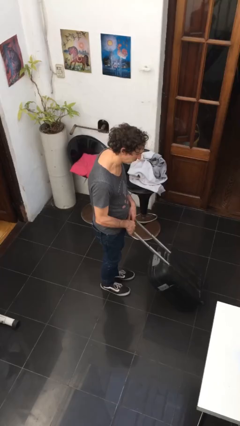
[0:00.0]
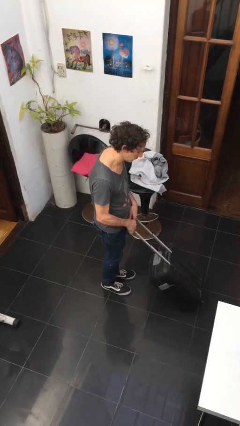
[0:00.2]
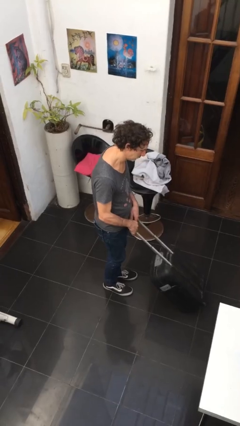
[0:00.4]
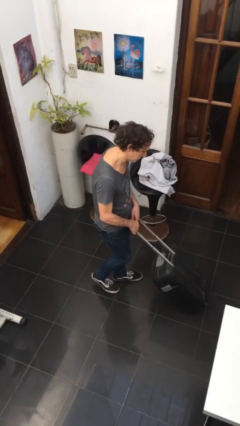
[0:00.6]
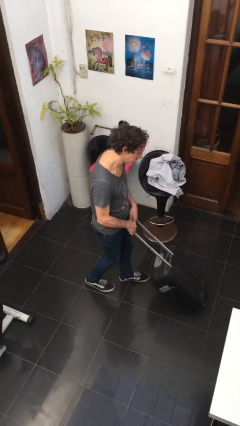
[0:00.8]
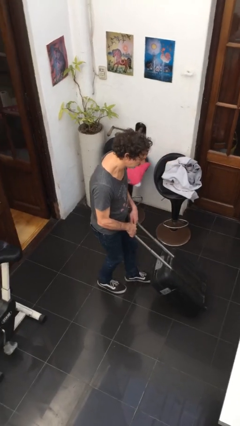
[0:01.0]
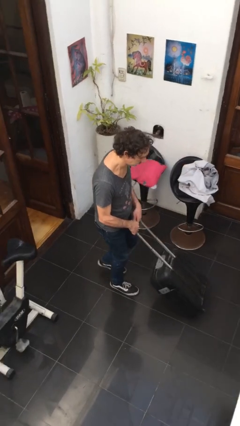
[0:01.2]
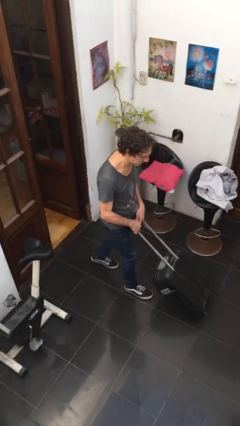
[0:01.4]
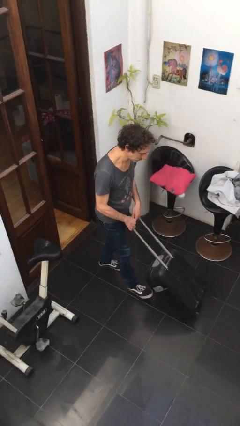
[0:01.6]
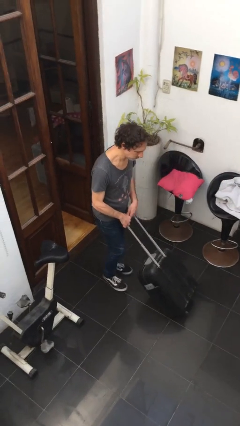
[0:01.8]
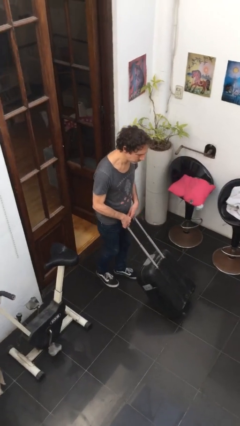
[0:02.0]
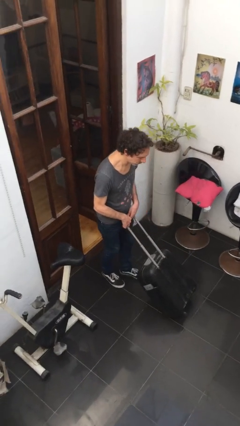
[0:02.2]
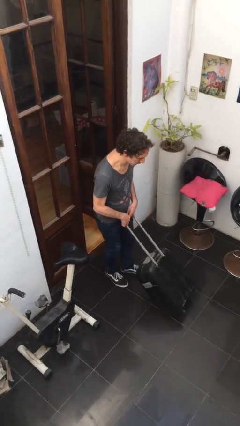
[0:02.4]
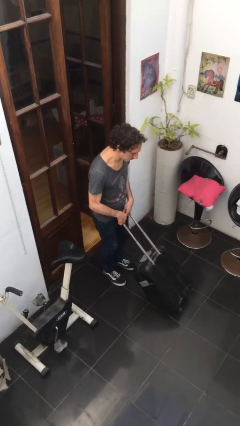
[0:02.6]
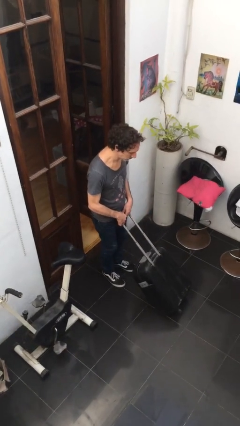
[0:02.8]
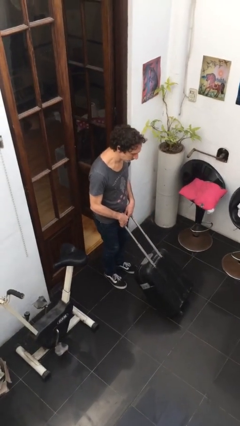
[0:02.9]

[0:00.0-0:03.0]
person pulls wheeled cart

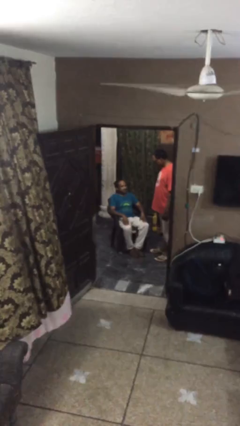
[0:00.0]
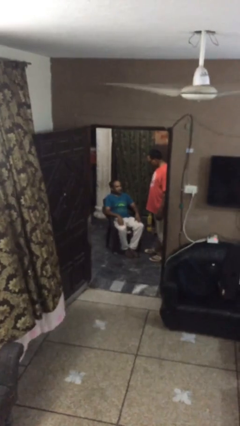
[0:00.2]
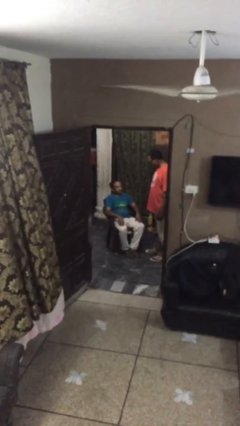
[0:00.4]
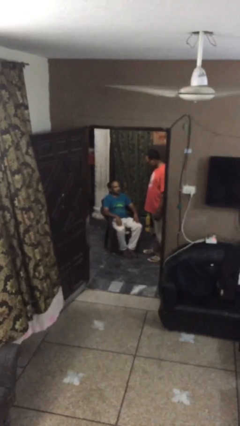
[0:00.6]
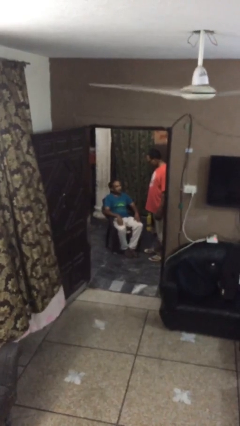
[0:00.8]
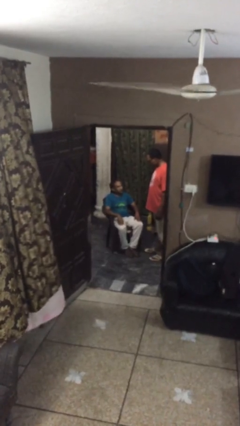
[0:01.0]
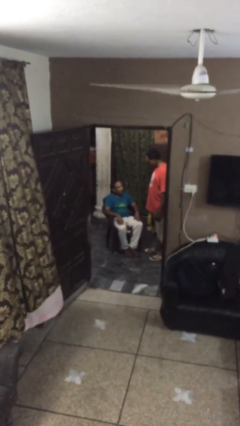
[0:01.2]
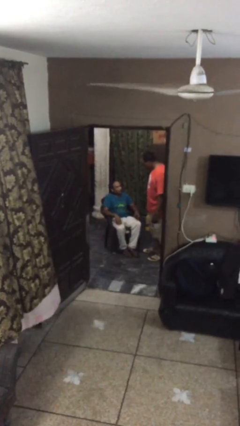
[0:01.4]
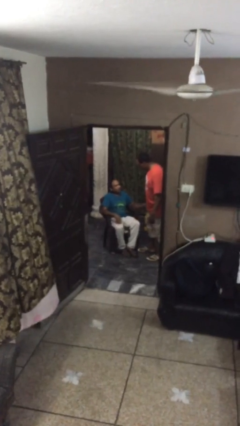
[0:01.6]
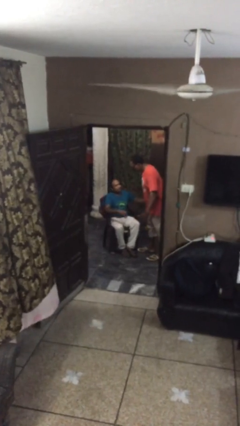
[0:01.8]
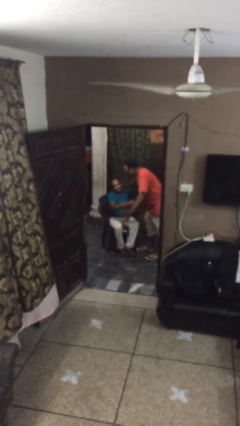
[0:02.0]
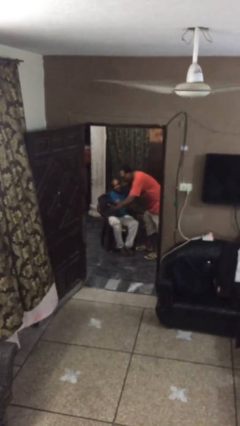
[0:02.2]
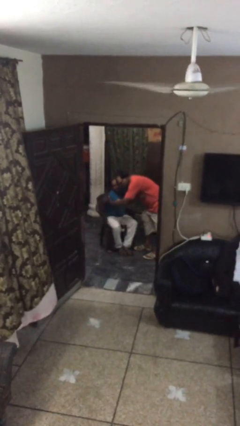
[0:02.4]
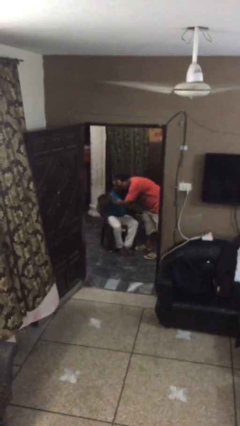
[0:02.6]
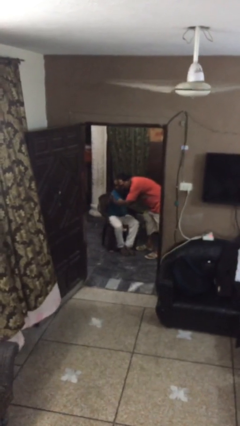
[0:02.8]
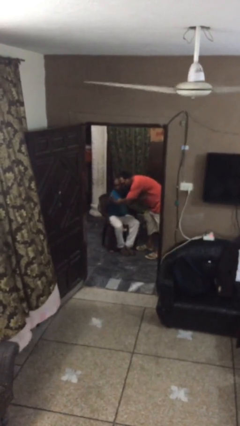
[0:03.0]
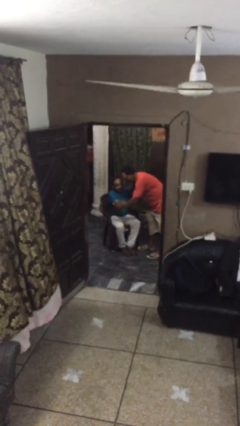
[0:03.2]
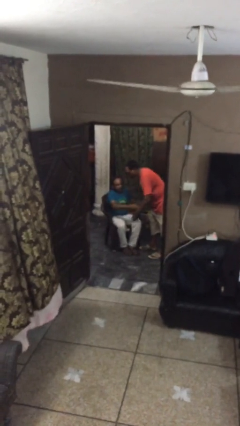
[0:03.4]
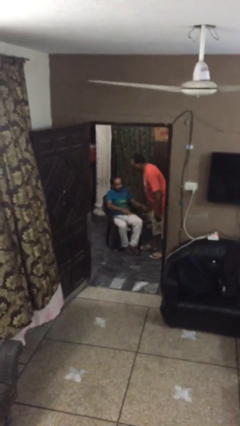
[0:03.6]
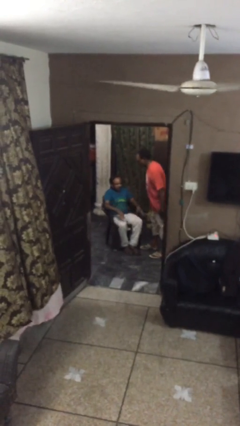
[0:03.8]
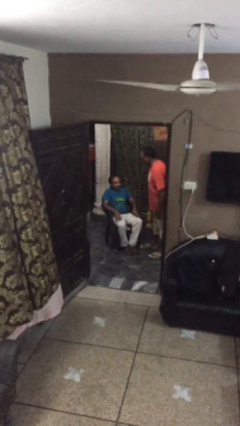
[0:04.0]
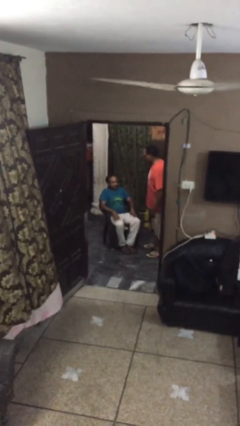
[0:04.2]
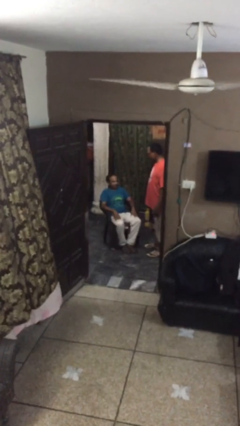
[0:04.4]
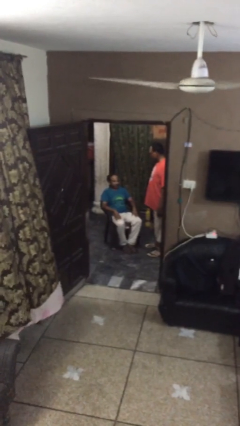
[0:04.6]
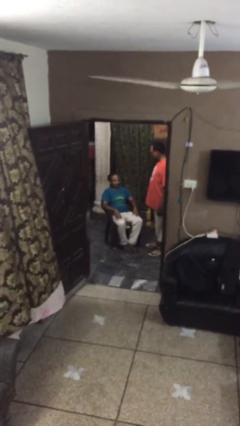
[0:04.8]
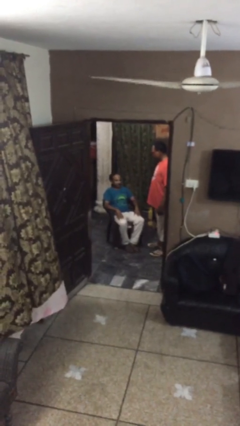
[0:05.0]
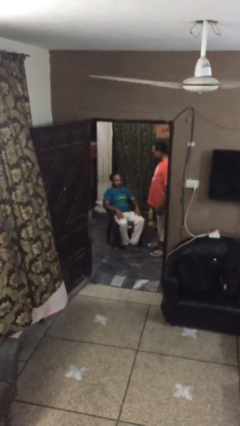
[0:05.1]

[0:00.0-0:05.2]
person embraces person

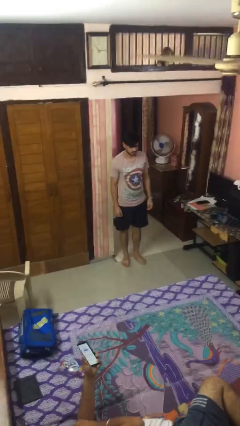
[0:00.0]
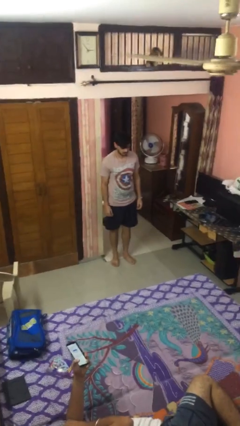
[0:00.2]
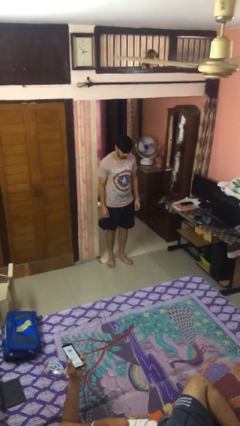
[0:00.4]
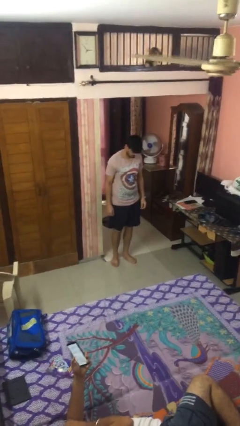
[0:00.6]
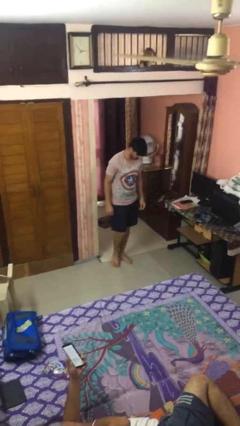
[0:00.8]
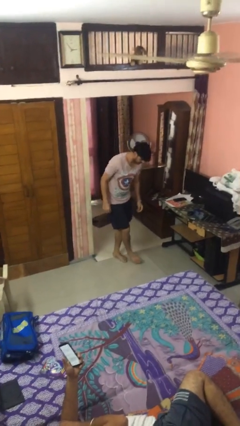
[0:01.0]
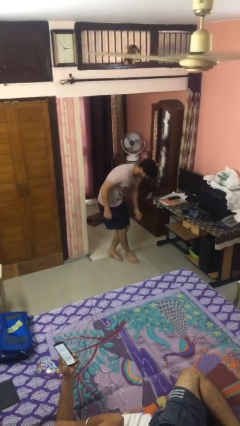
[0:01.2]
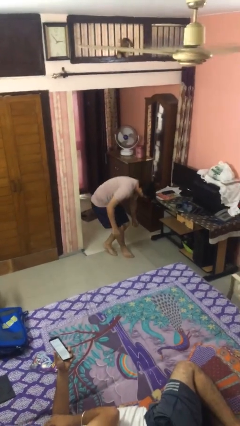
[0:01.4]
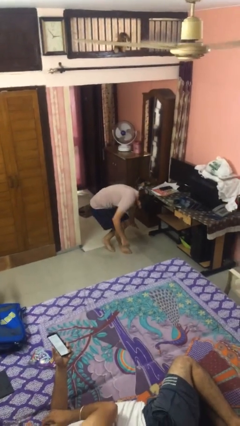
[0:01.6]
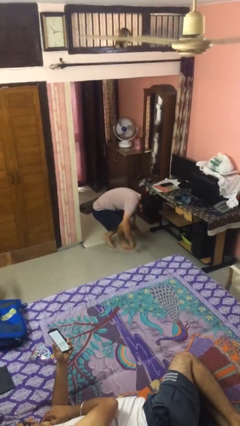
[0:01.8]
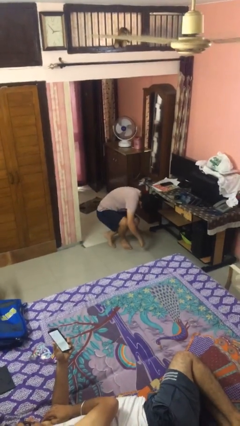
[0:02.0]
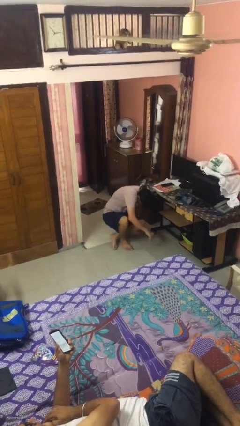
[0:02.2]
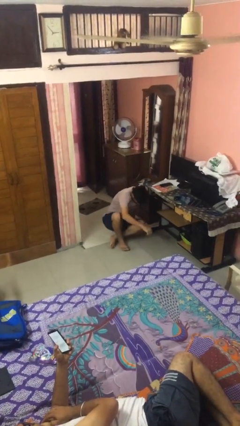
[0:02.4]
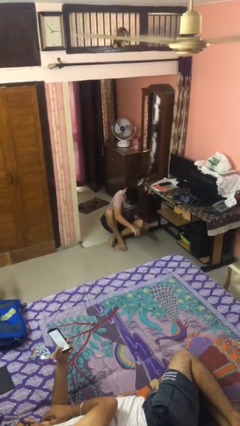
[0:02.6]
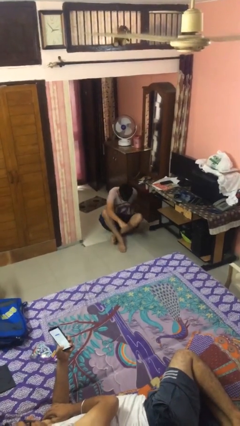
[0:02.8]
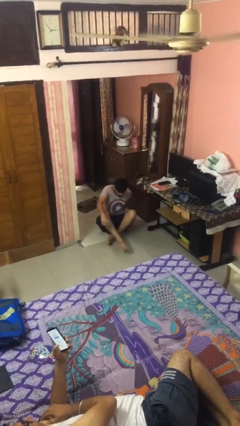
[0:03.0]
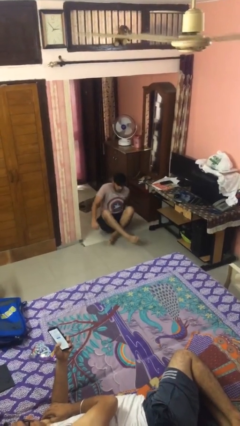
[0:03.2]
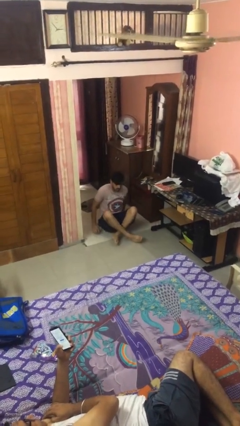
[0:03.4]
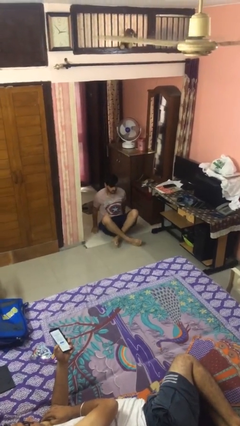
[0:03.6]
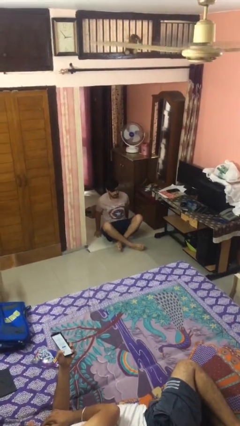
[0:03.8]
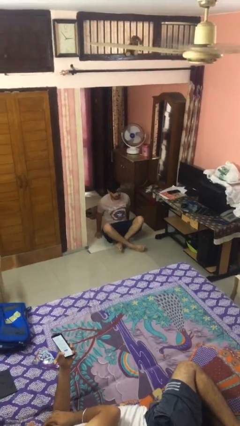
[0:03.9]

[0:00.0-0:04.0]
person sits crisscross

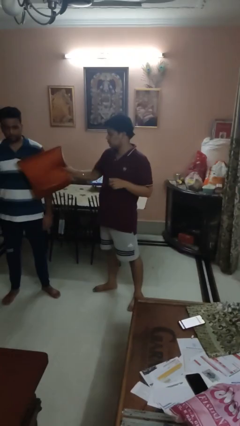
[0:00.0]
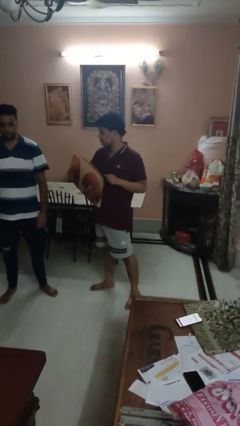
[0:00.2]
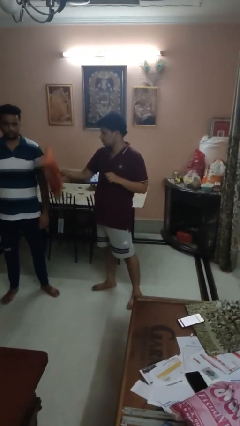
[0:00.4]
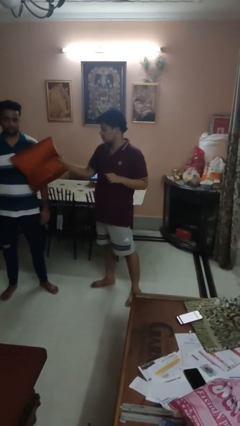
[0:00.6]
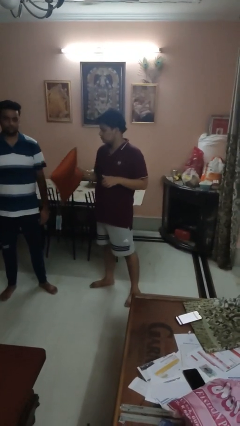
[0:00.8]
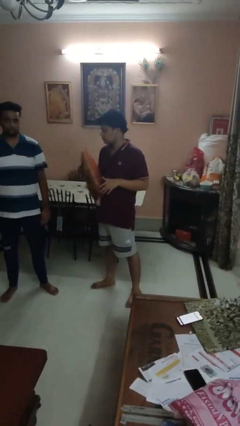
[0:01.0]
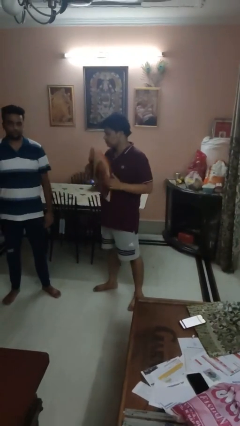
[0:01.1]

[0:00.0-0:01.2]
person hits person with pillow

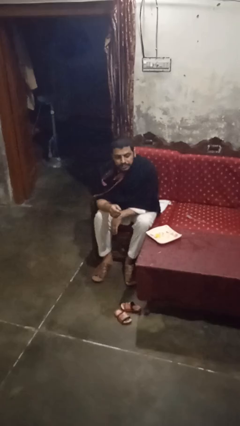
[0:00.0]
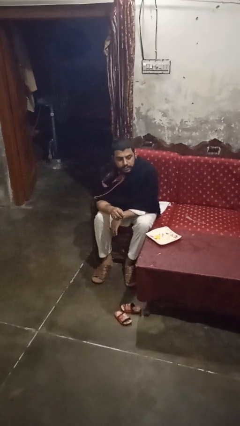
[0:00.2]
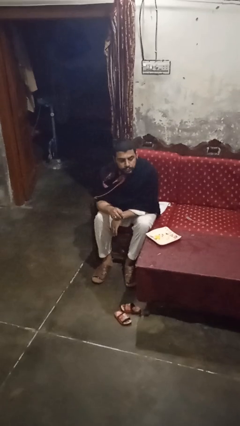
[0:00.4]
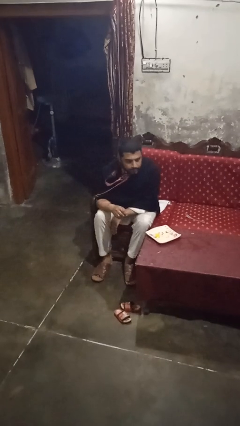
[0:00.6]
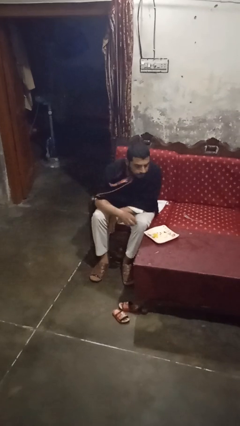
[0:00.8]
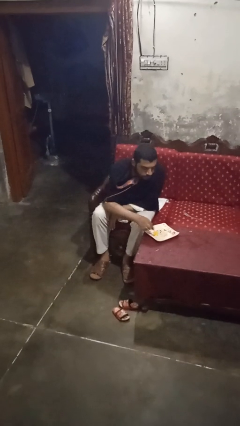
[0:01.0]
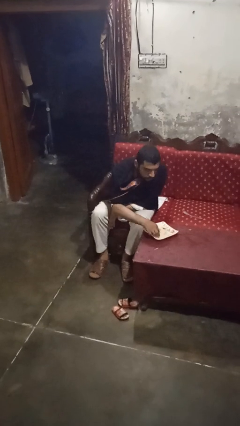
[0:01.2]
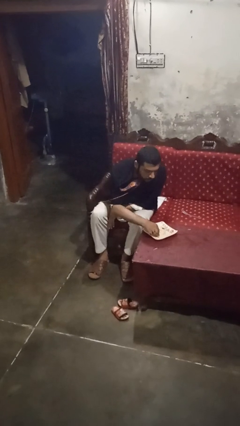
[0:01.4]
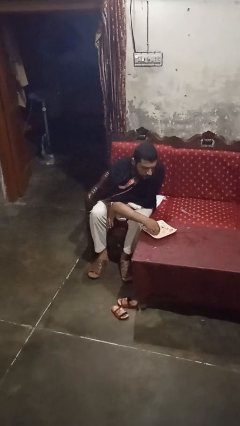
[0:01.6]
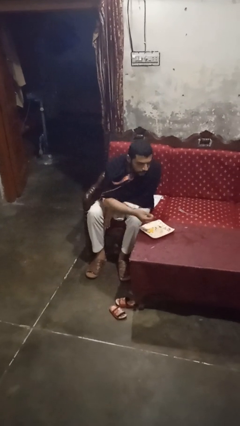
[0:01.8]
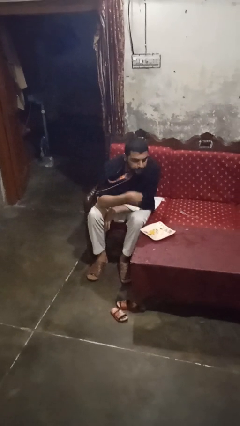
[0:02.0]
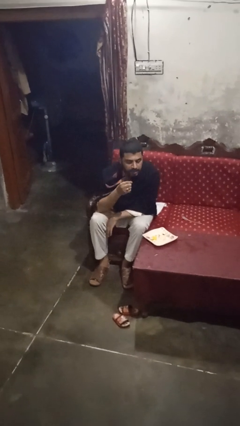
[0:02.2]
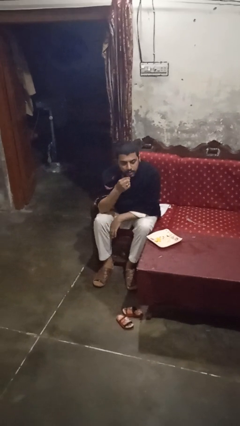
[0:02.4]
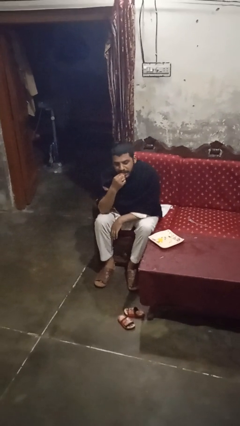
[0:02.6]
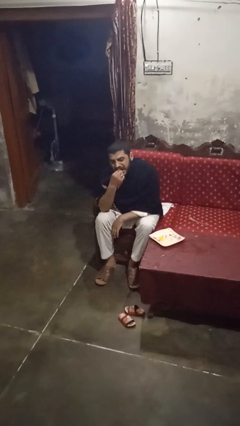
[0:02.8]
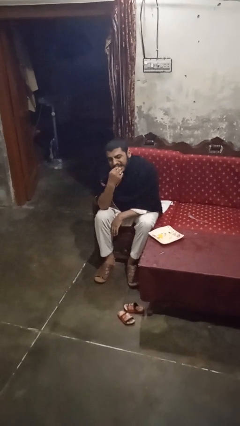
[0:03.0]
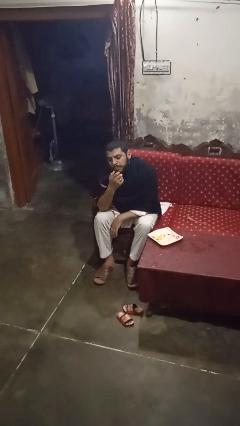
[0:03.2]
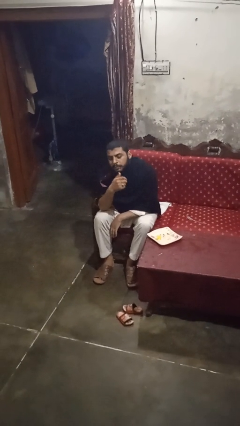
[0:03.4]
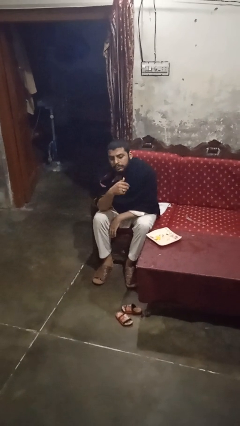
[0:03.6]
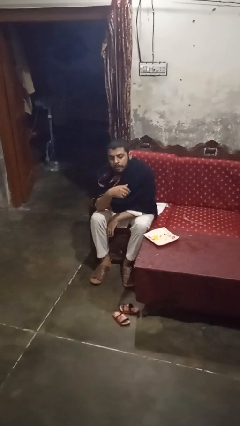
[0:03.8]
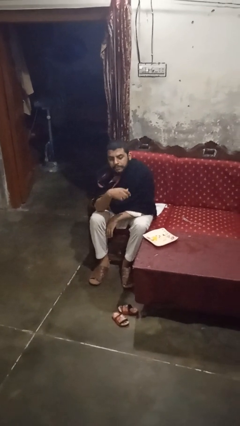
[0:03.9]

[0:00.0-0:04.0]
person eats with hands
